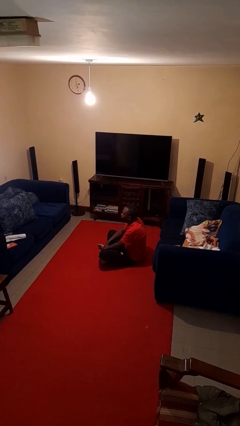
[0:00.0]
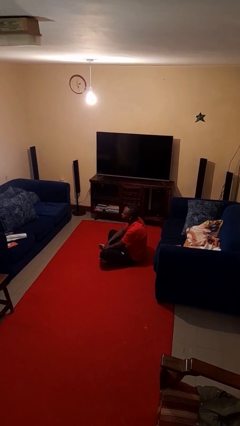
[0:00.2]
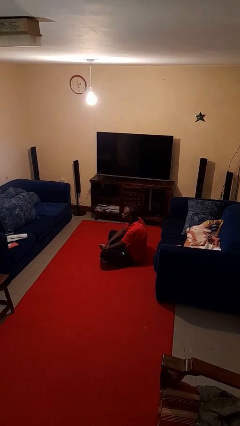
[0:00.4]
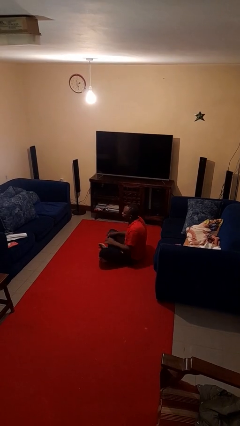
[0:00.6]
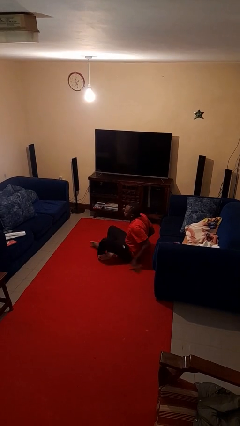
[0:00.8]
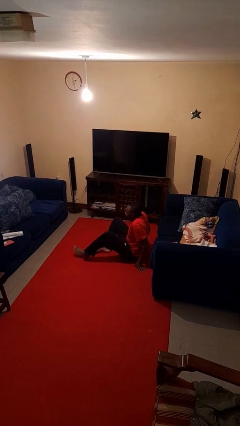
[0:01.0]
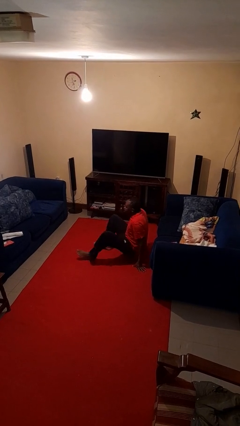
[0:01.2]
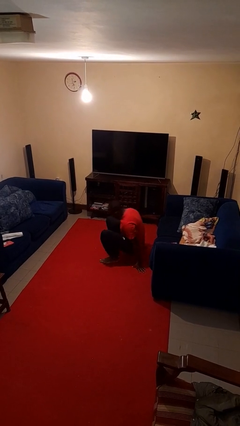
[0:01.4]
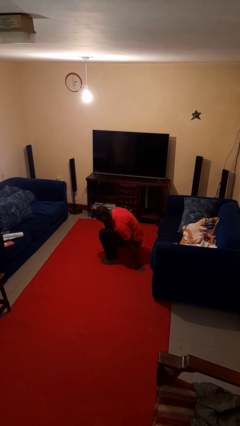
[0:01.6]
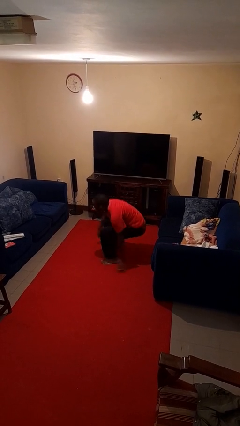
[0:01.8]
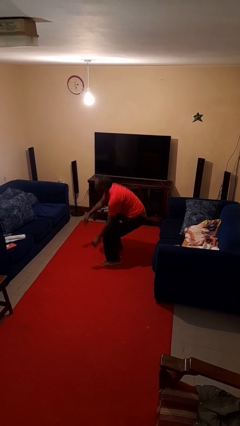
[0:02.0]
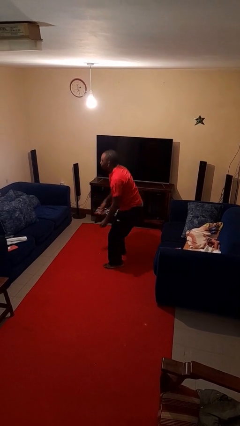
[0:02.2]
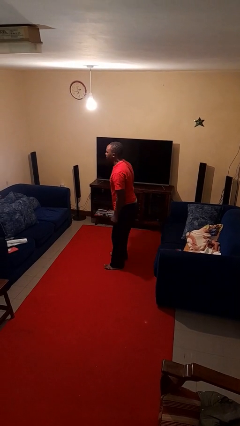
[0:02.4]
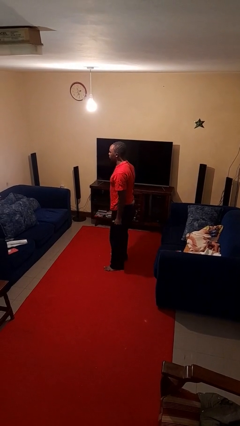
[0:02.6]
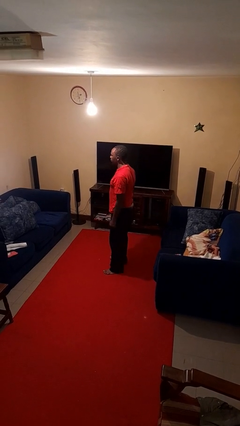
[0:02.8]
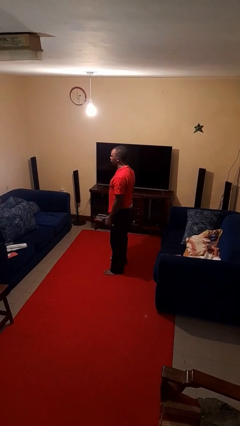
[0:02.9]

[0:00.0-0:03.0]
person stands up from floor

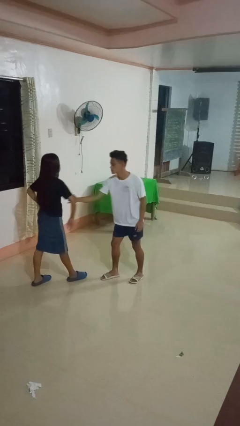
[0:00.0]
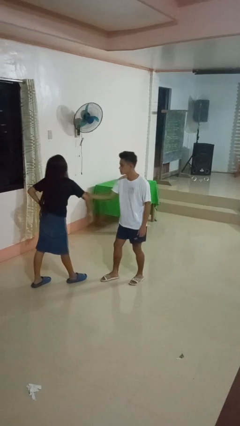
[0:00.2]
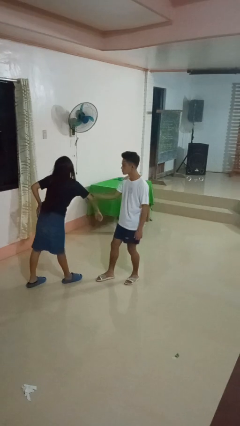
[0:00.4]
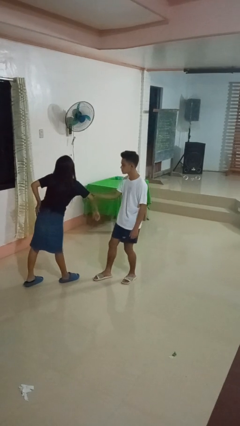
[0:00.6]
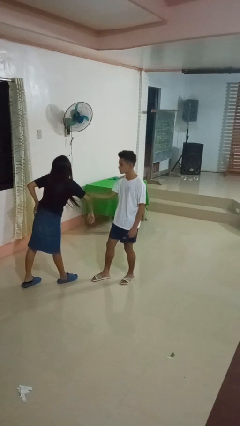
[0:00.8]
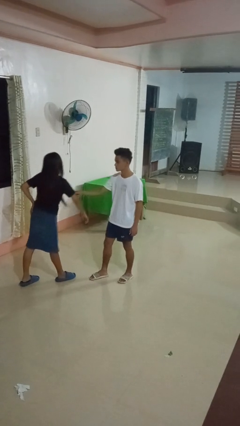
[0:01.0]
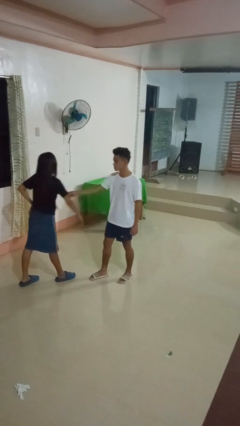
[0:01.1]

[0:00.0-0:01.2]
person grabs person by bicep

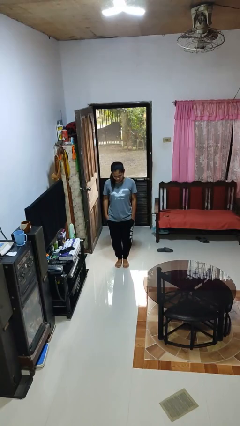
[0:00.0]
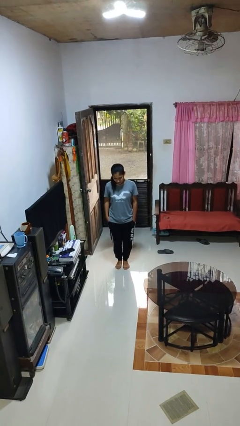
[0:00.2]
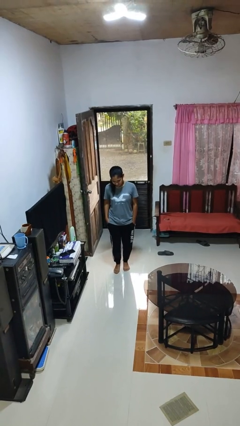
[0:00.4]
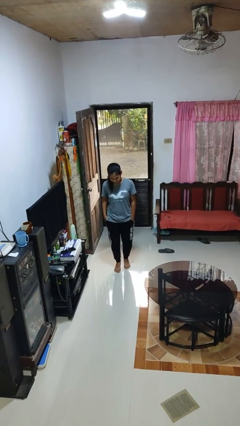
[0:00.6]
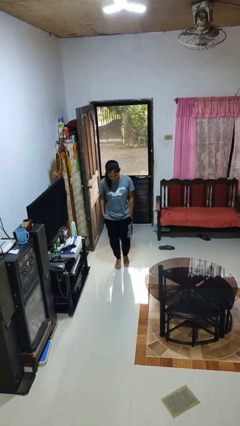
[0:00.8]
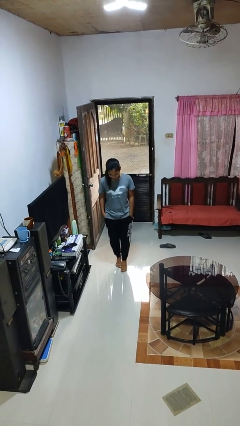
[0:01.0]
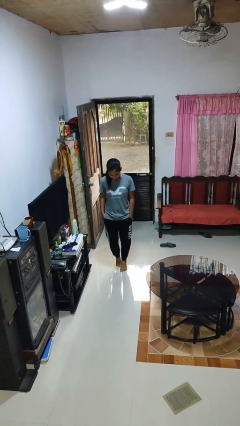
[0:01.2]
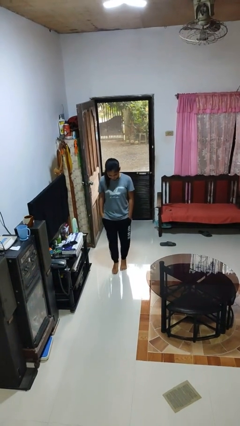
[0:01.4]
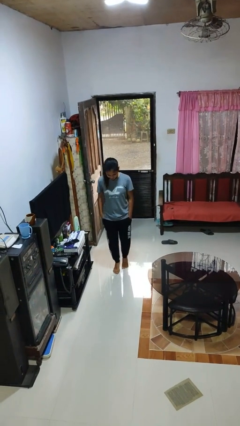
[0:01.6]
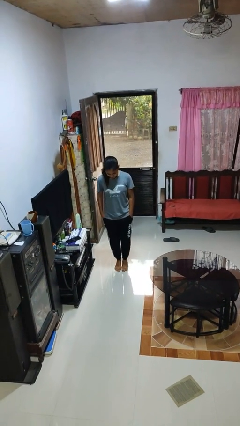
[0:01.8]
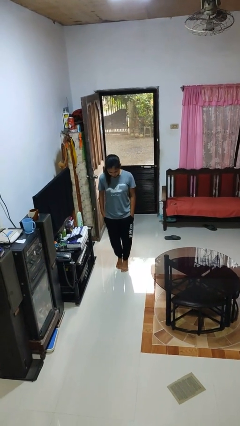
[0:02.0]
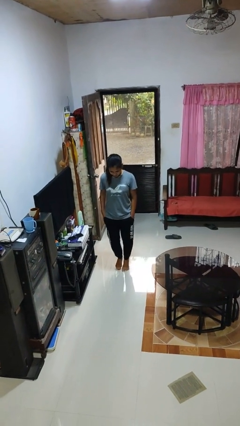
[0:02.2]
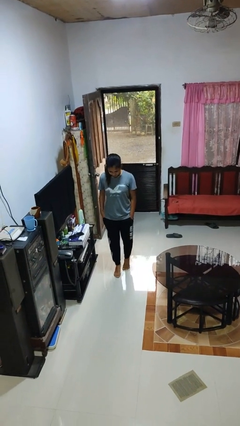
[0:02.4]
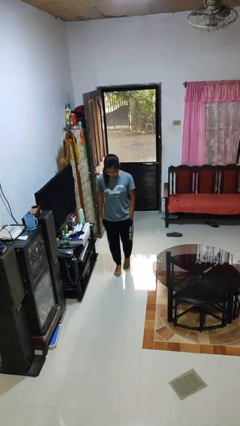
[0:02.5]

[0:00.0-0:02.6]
person walks tiptoe

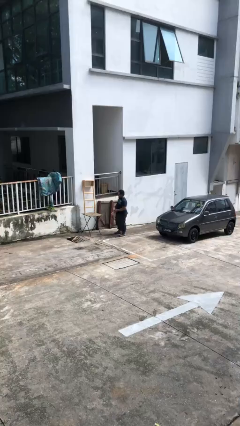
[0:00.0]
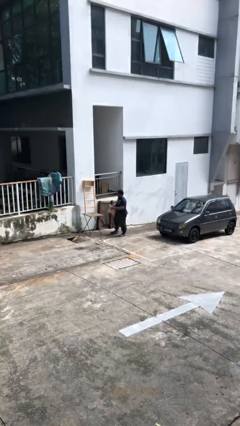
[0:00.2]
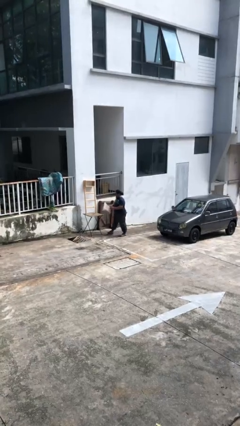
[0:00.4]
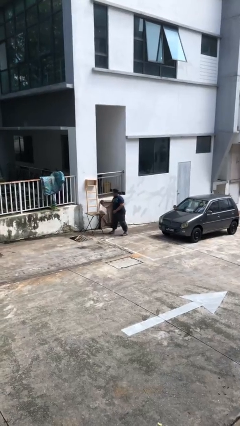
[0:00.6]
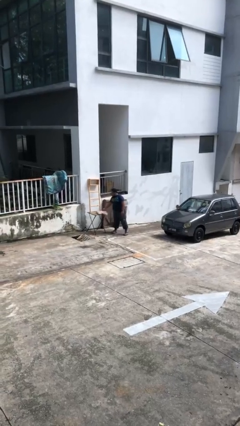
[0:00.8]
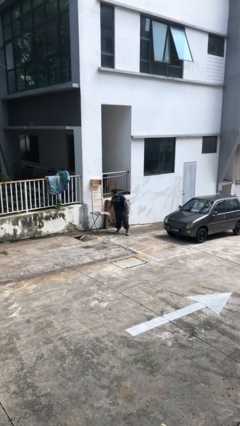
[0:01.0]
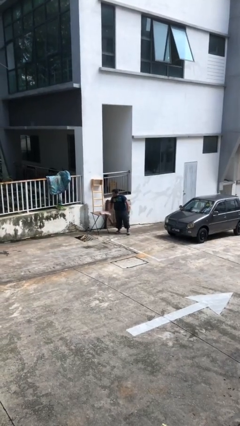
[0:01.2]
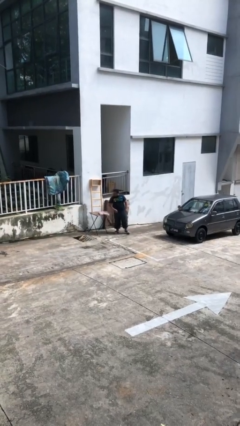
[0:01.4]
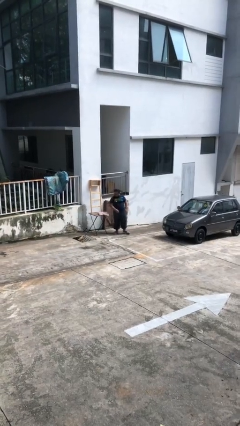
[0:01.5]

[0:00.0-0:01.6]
person puts down object on table

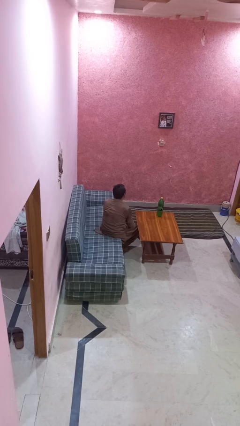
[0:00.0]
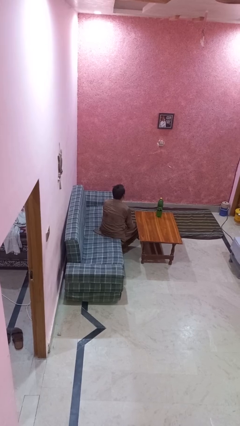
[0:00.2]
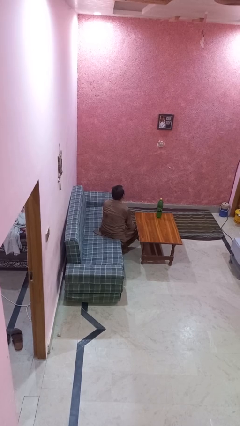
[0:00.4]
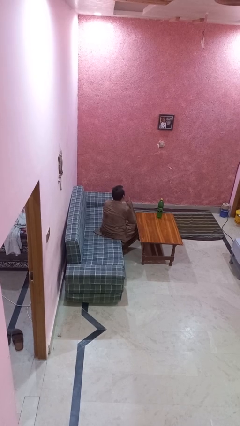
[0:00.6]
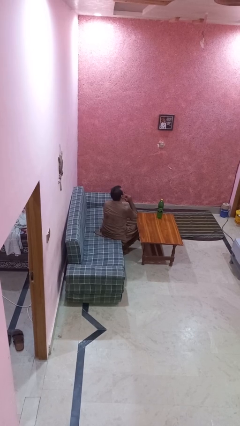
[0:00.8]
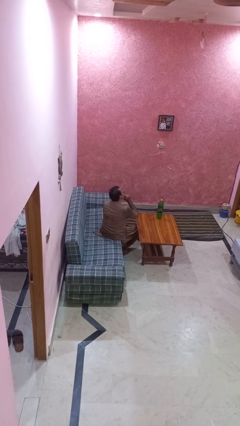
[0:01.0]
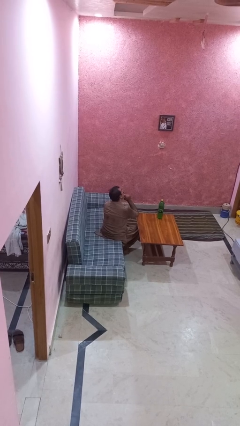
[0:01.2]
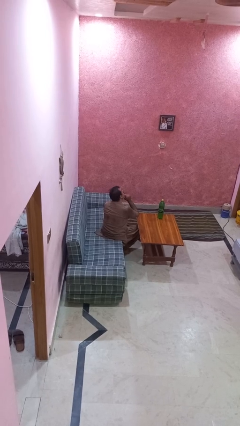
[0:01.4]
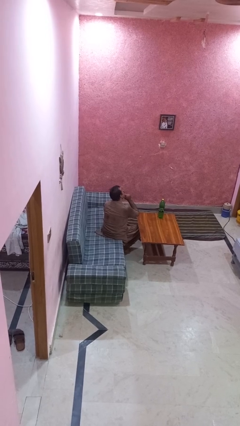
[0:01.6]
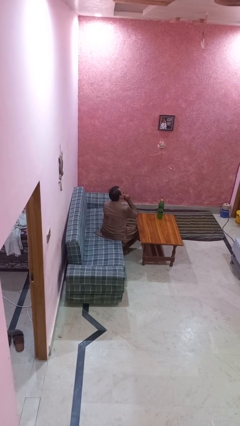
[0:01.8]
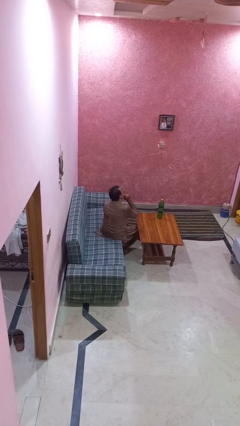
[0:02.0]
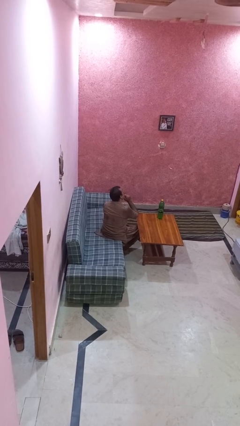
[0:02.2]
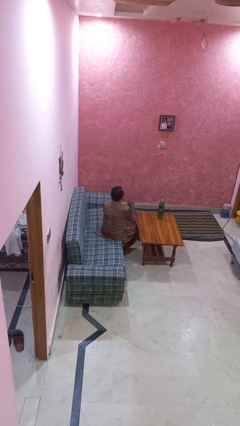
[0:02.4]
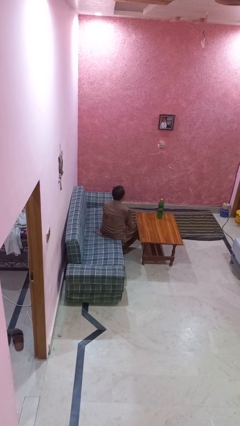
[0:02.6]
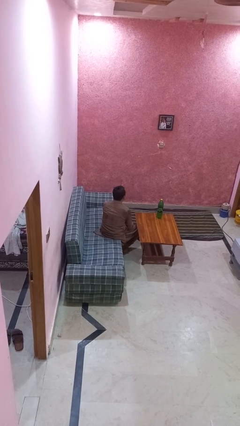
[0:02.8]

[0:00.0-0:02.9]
person strokes chin

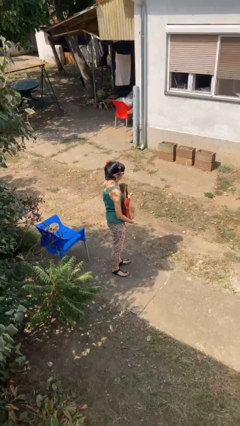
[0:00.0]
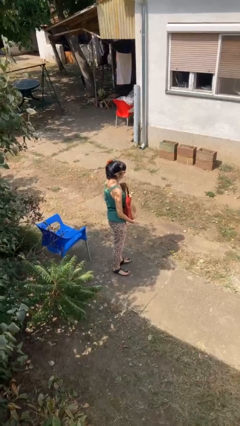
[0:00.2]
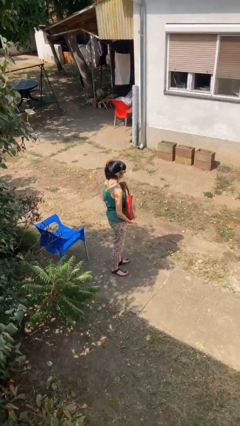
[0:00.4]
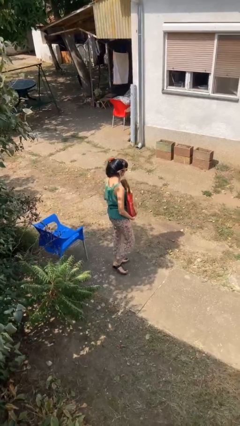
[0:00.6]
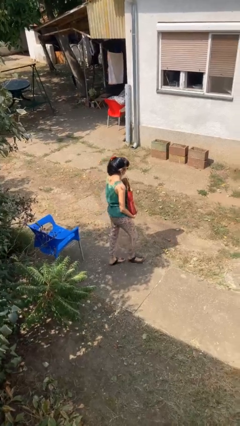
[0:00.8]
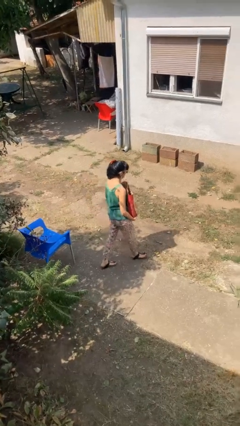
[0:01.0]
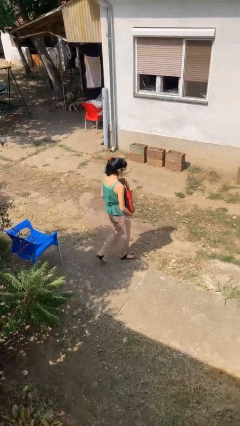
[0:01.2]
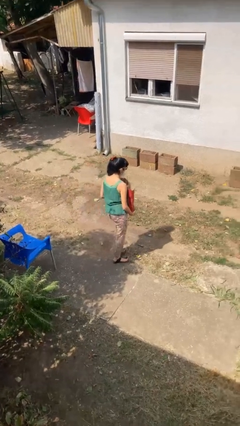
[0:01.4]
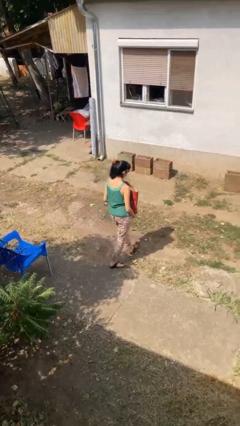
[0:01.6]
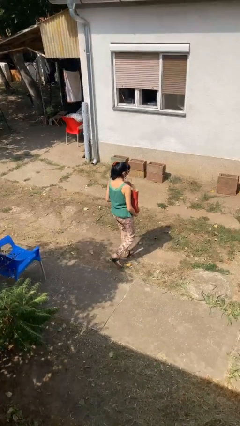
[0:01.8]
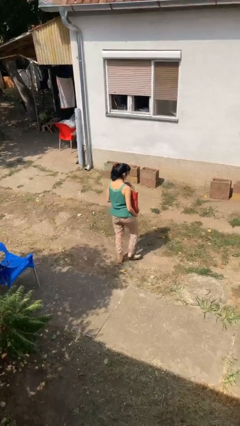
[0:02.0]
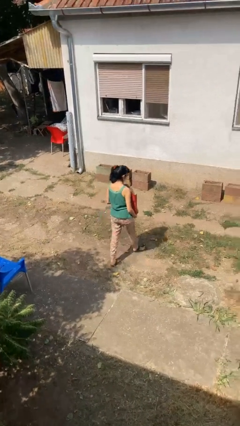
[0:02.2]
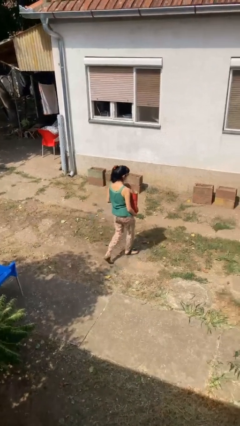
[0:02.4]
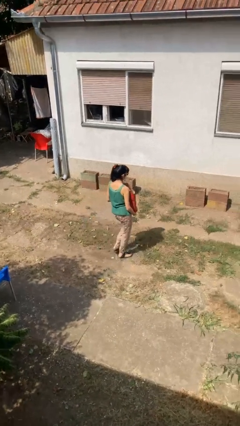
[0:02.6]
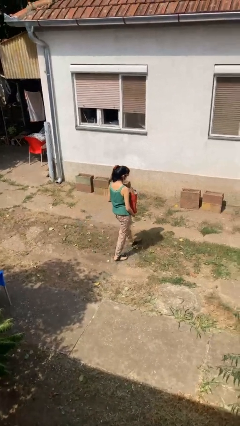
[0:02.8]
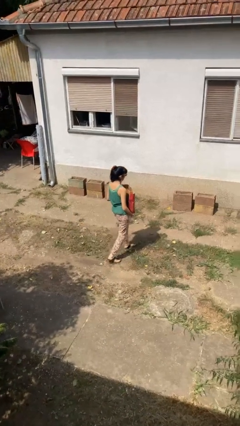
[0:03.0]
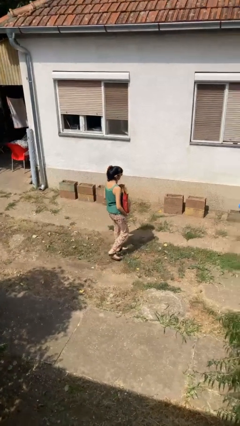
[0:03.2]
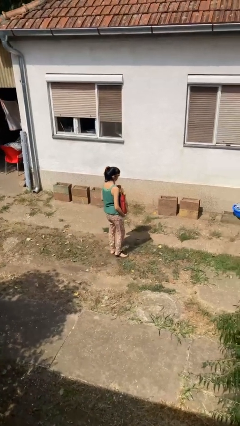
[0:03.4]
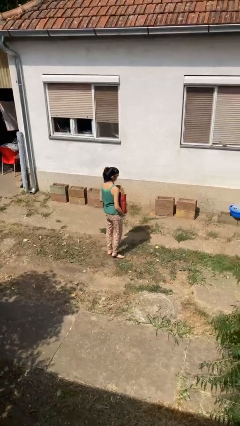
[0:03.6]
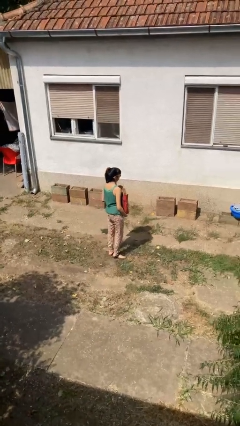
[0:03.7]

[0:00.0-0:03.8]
person carries groceries

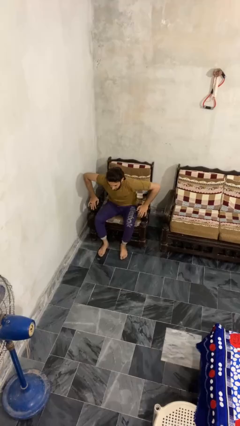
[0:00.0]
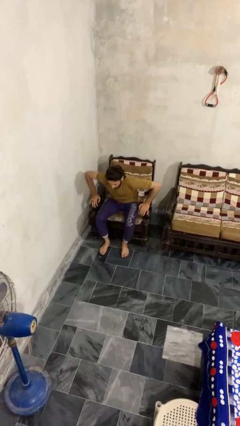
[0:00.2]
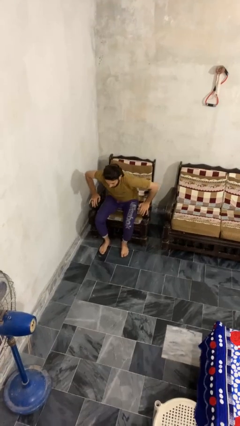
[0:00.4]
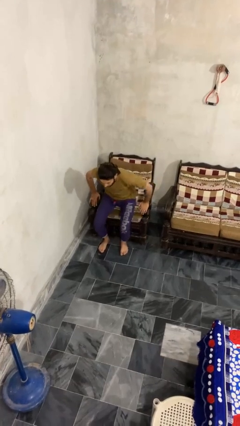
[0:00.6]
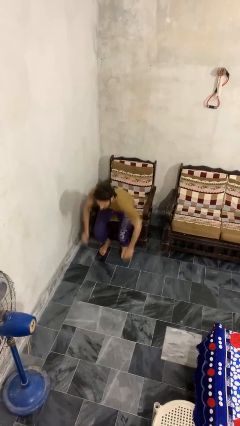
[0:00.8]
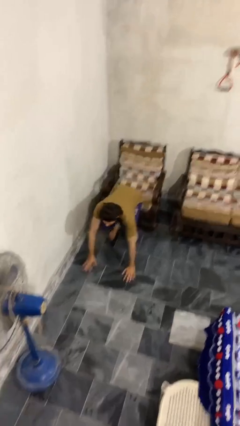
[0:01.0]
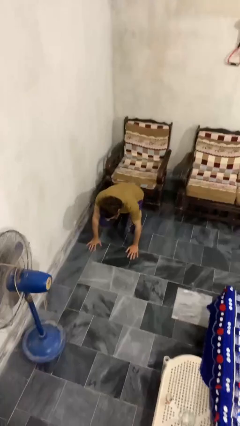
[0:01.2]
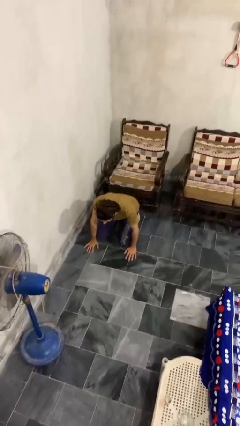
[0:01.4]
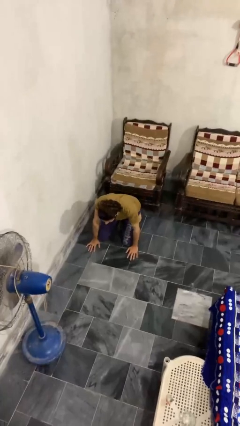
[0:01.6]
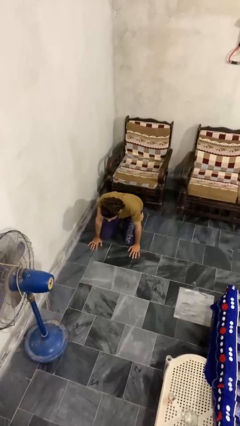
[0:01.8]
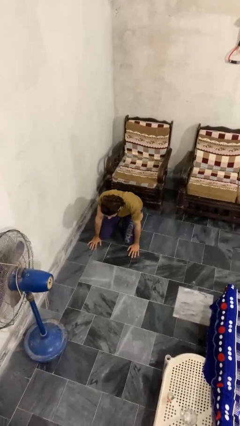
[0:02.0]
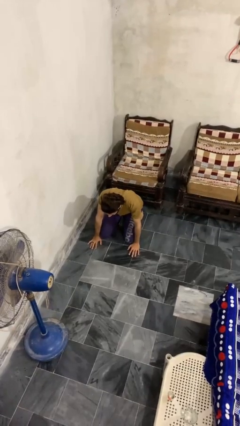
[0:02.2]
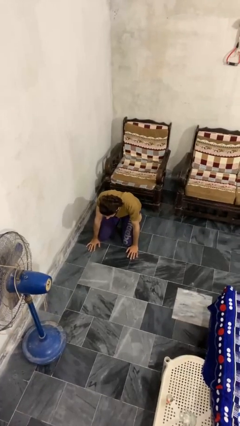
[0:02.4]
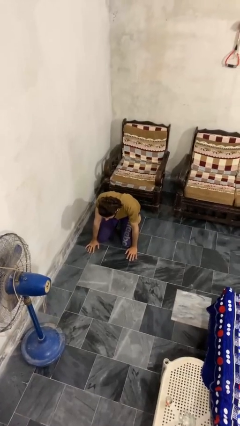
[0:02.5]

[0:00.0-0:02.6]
person falls from chair
